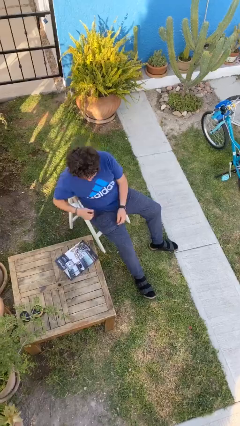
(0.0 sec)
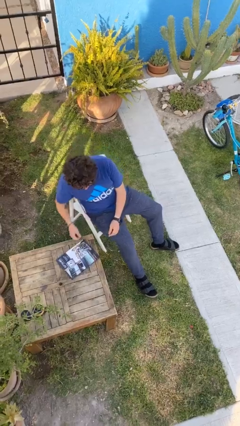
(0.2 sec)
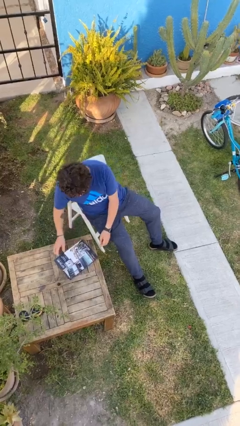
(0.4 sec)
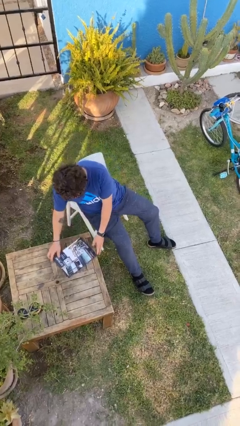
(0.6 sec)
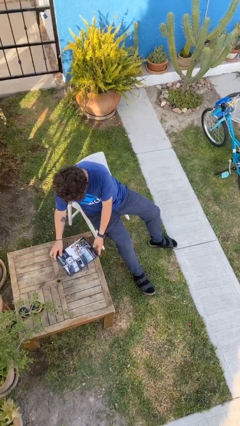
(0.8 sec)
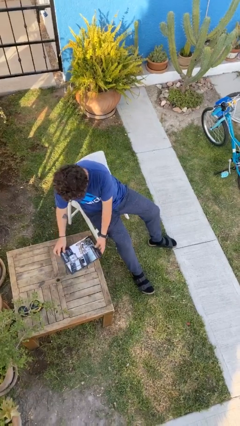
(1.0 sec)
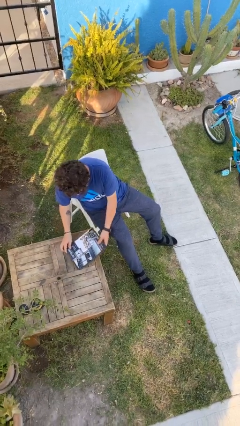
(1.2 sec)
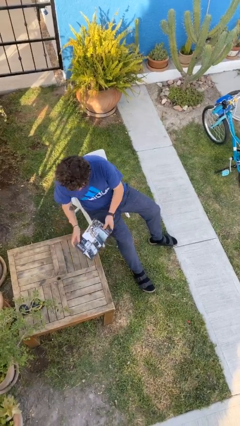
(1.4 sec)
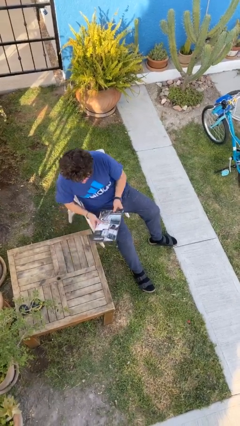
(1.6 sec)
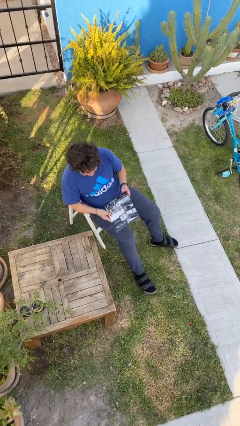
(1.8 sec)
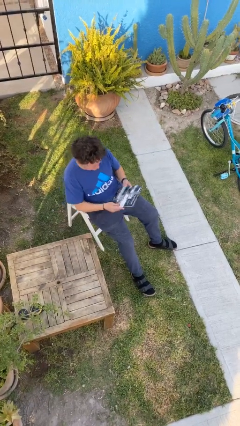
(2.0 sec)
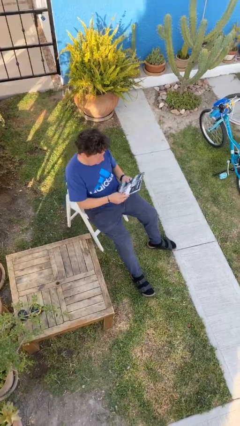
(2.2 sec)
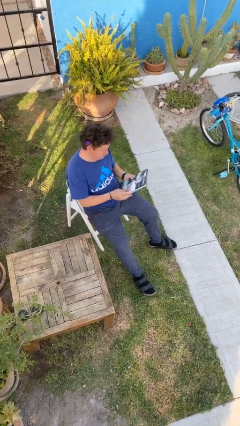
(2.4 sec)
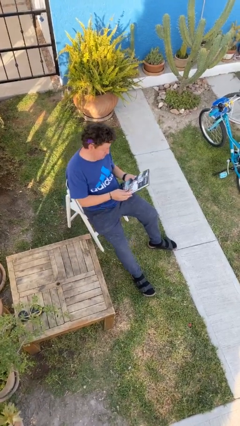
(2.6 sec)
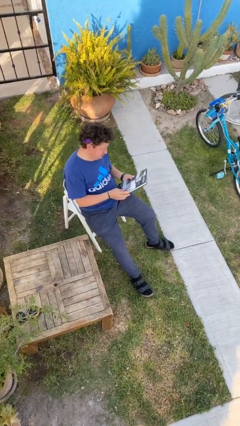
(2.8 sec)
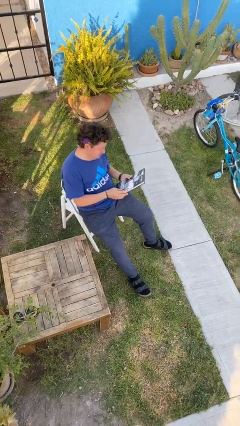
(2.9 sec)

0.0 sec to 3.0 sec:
person picks up object from table

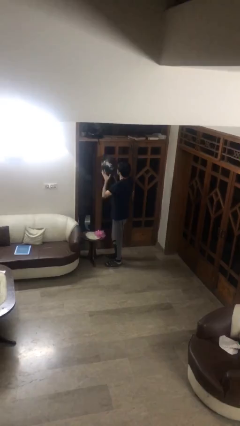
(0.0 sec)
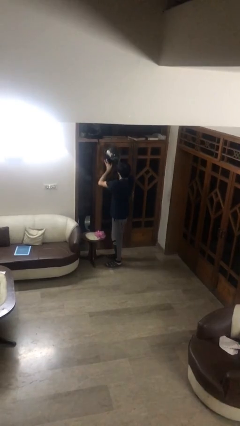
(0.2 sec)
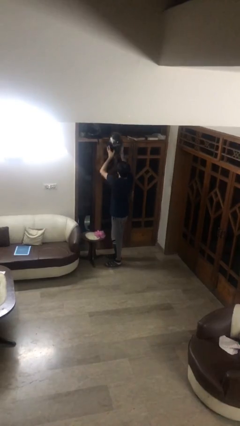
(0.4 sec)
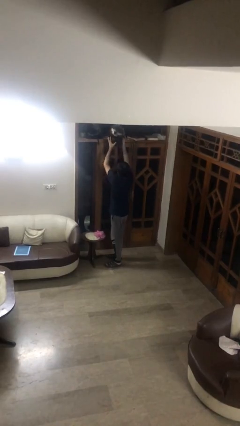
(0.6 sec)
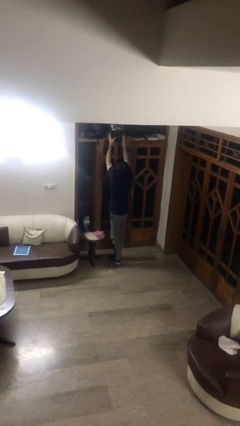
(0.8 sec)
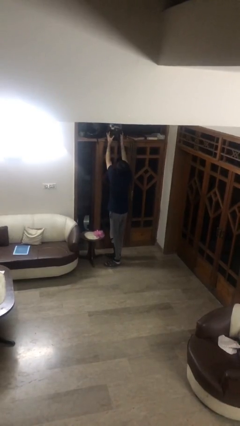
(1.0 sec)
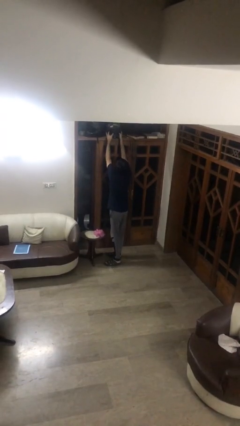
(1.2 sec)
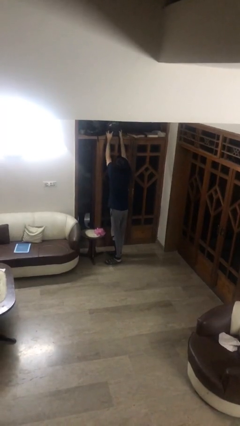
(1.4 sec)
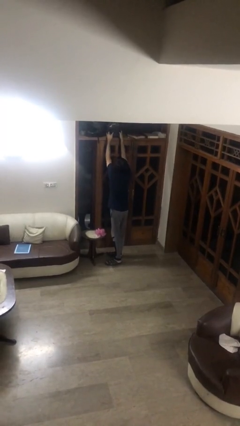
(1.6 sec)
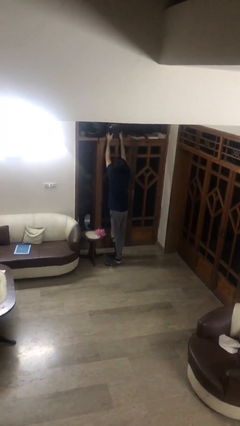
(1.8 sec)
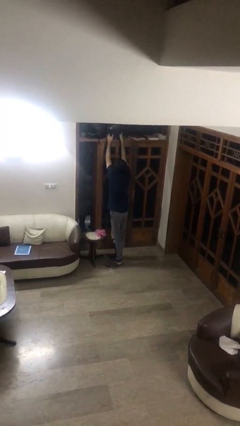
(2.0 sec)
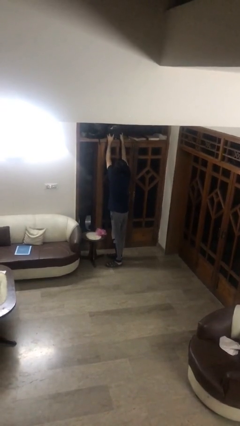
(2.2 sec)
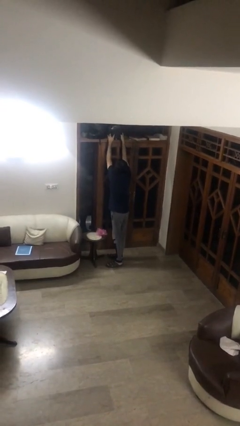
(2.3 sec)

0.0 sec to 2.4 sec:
person puts down object on shelf

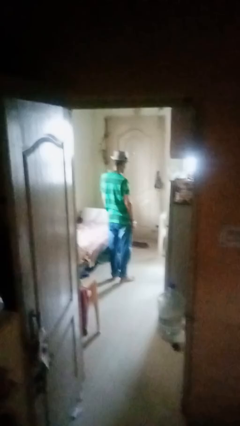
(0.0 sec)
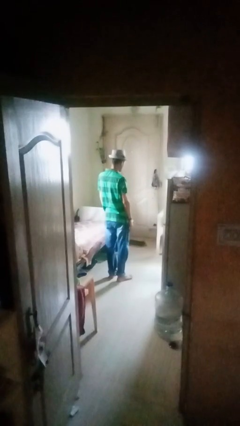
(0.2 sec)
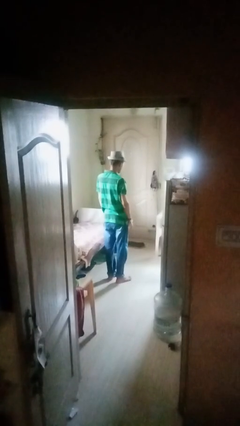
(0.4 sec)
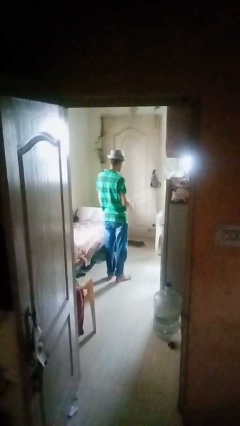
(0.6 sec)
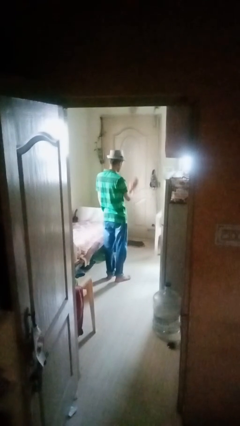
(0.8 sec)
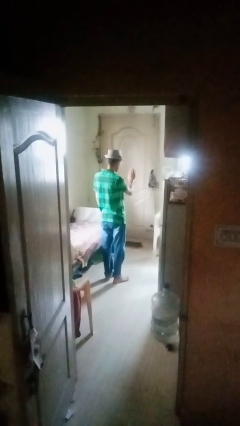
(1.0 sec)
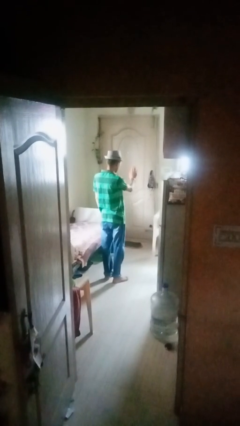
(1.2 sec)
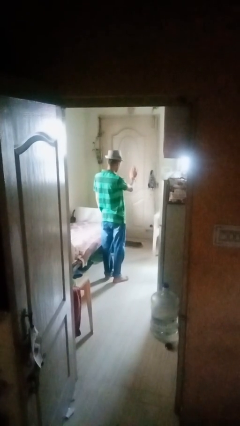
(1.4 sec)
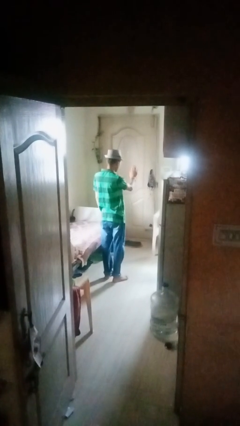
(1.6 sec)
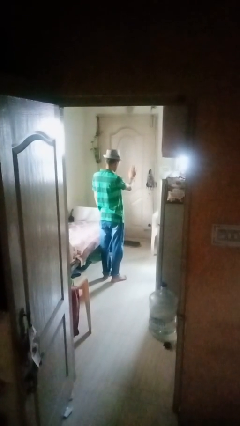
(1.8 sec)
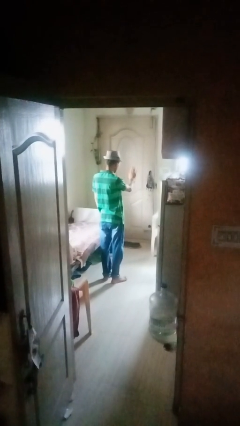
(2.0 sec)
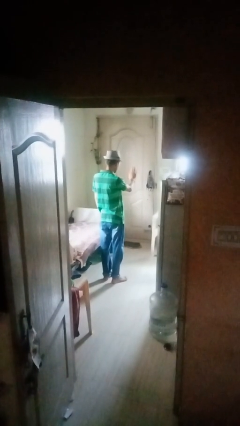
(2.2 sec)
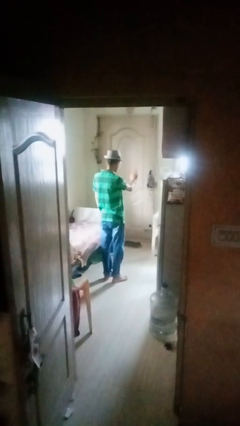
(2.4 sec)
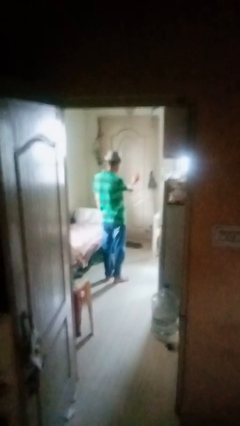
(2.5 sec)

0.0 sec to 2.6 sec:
person gestures stop

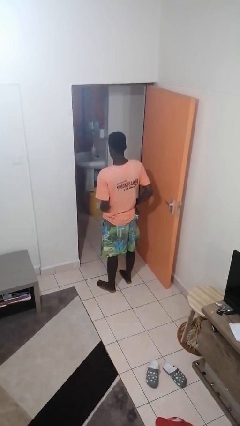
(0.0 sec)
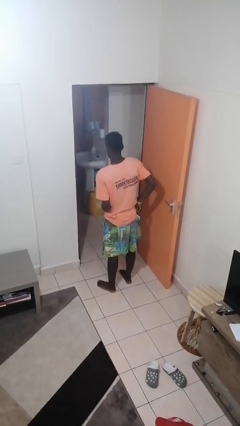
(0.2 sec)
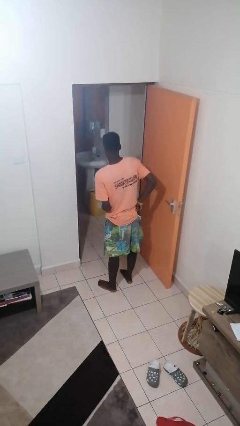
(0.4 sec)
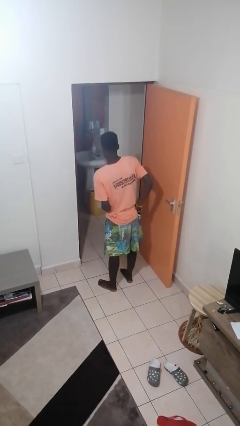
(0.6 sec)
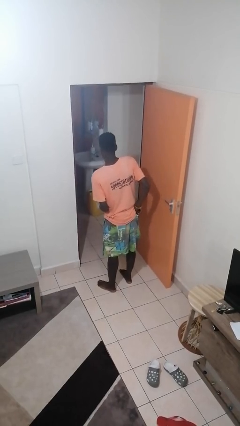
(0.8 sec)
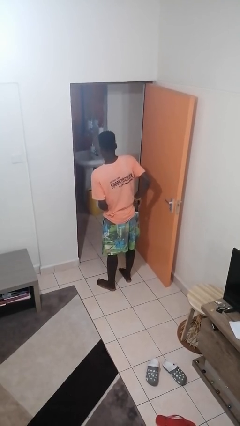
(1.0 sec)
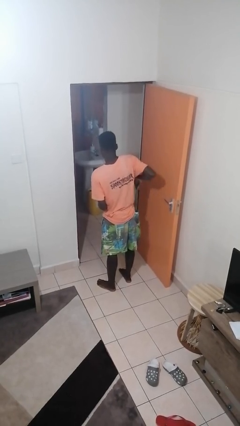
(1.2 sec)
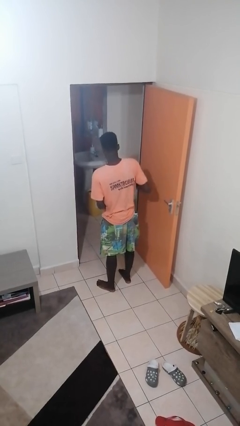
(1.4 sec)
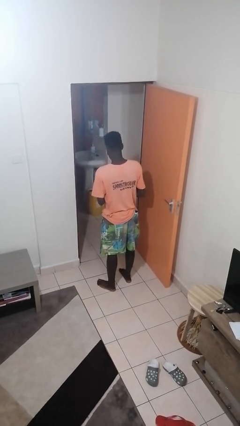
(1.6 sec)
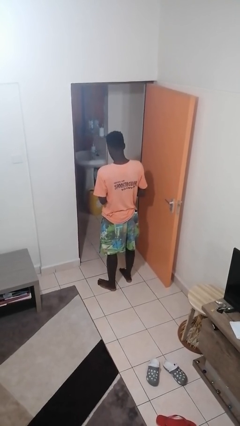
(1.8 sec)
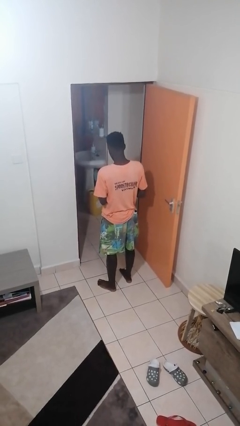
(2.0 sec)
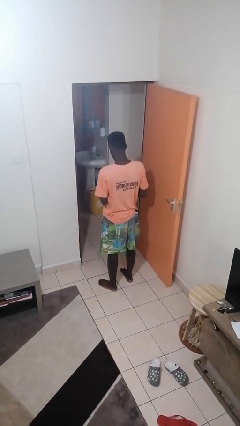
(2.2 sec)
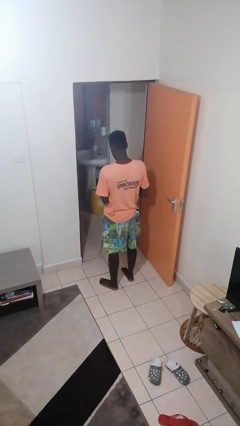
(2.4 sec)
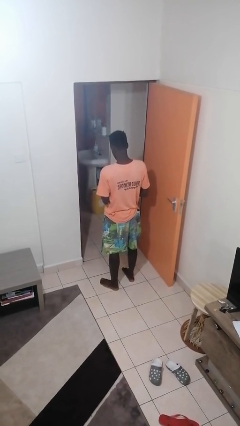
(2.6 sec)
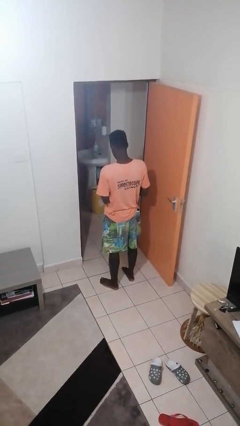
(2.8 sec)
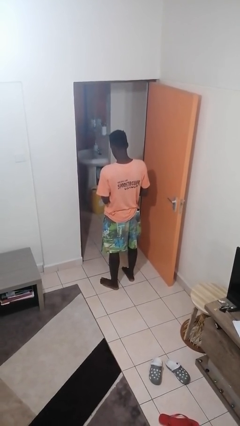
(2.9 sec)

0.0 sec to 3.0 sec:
person takes phone from pocket

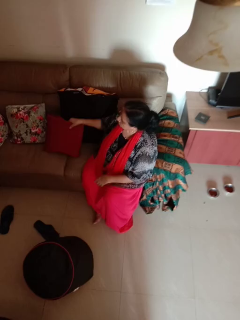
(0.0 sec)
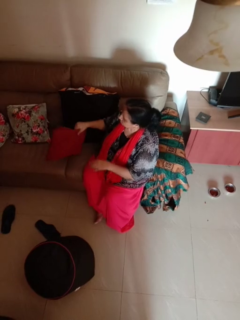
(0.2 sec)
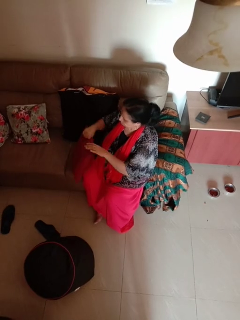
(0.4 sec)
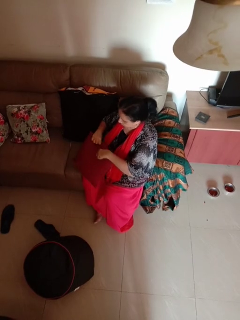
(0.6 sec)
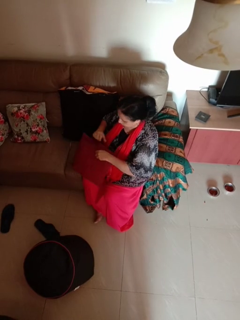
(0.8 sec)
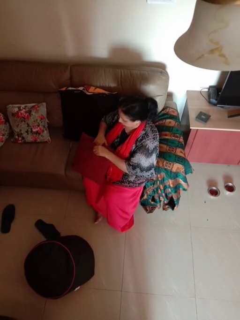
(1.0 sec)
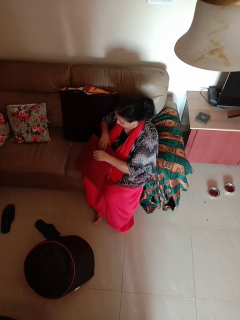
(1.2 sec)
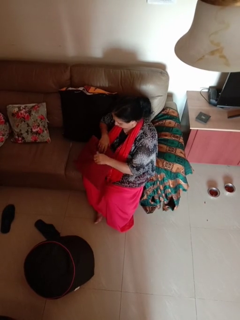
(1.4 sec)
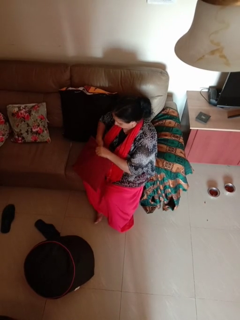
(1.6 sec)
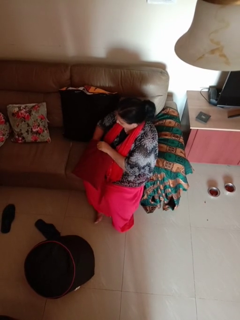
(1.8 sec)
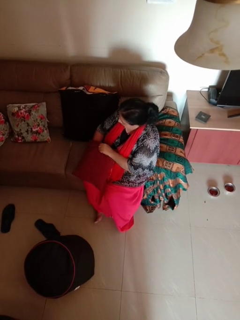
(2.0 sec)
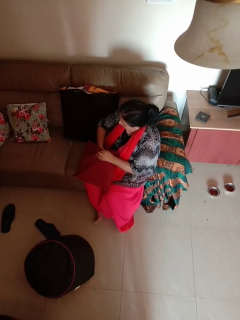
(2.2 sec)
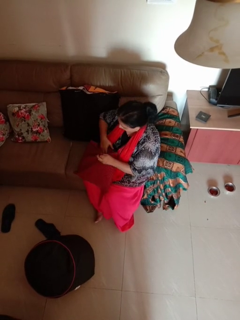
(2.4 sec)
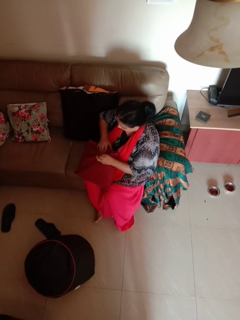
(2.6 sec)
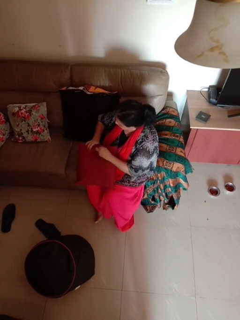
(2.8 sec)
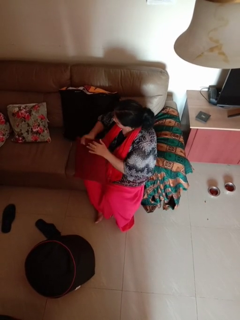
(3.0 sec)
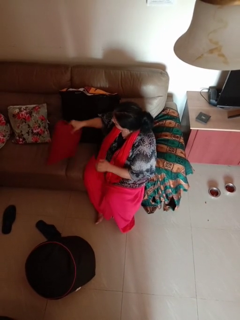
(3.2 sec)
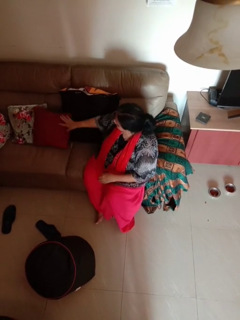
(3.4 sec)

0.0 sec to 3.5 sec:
person searches in couch

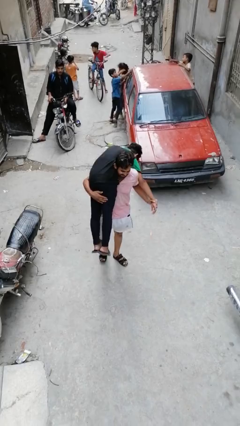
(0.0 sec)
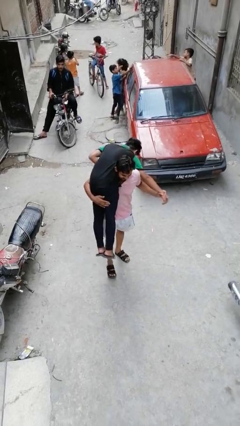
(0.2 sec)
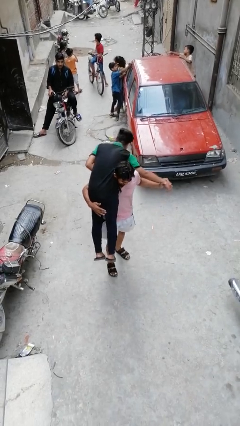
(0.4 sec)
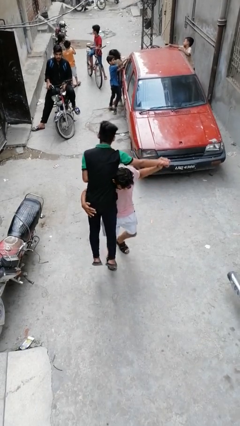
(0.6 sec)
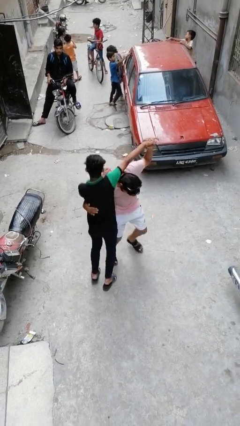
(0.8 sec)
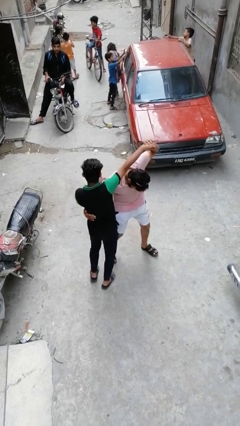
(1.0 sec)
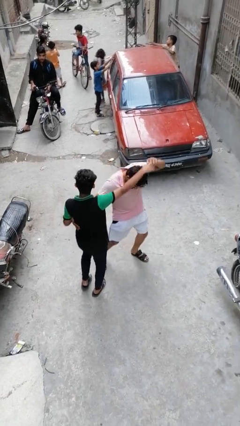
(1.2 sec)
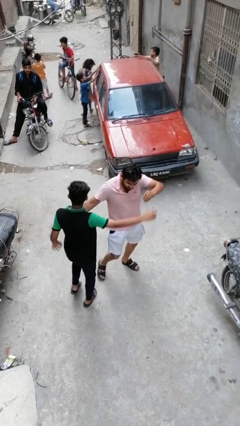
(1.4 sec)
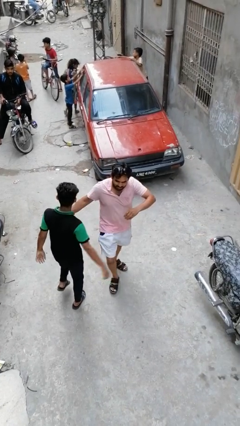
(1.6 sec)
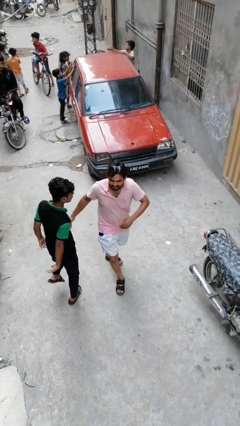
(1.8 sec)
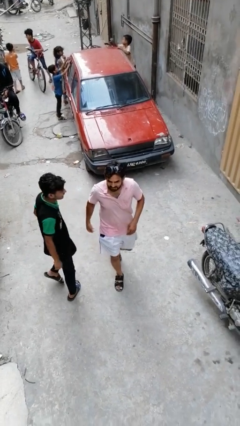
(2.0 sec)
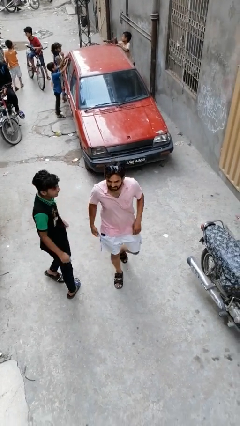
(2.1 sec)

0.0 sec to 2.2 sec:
person puts down person

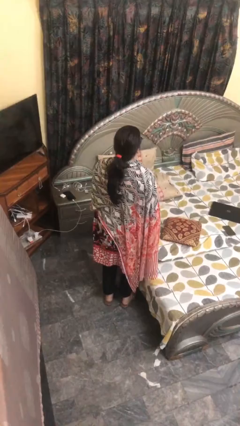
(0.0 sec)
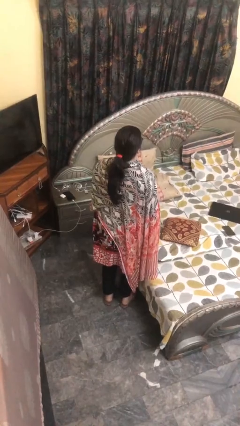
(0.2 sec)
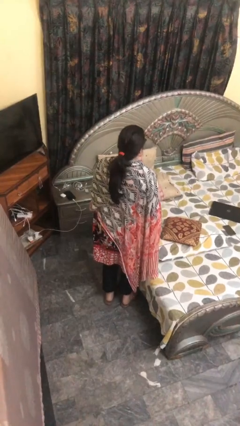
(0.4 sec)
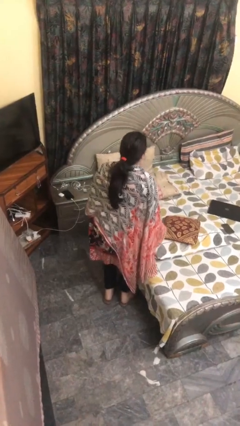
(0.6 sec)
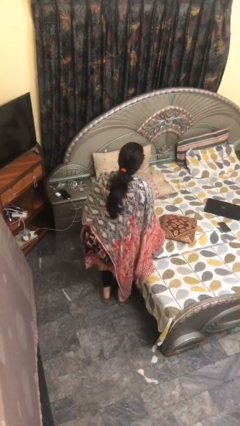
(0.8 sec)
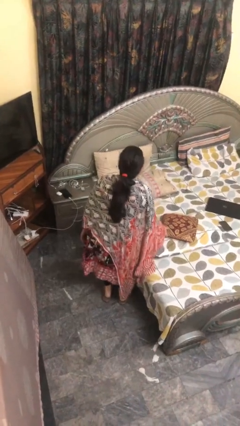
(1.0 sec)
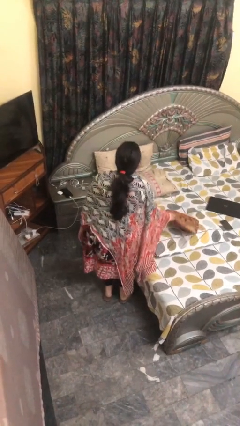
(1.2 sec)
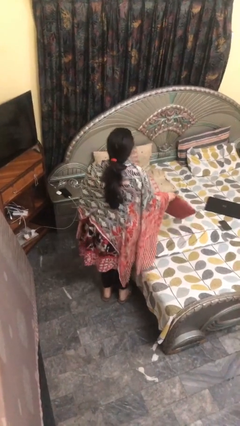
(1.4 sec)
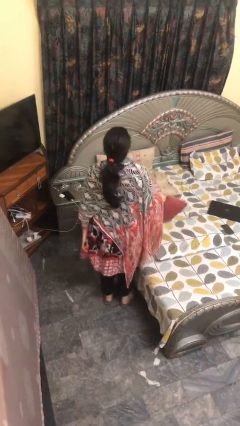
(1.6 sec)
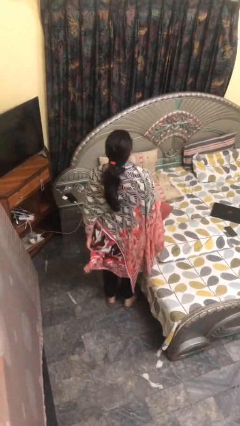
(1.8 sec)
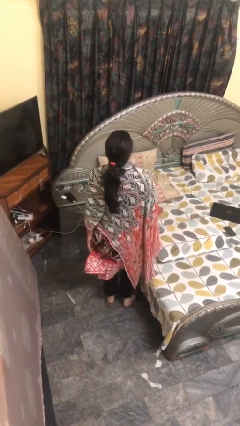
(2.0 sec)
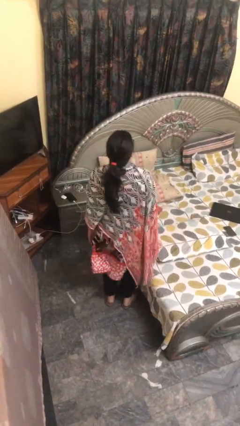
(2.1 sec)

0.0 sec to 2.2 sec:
person picks up object from bed
